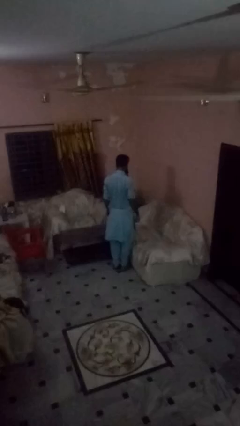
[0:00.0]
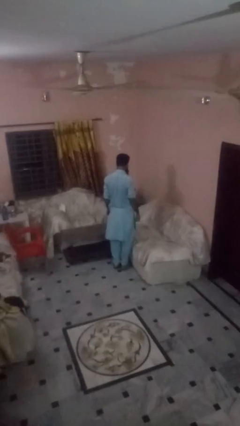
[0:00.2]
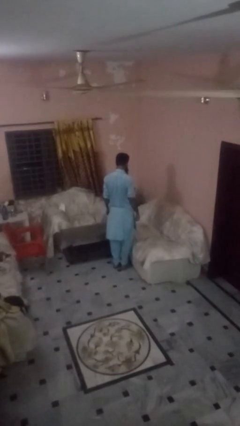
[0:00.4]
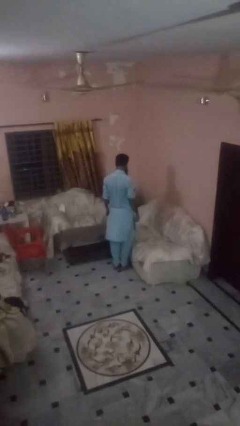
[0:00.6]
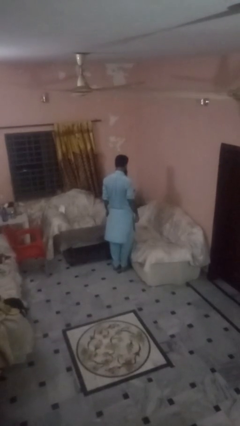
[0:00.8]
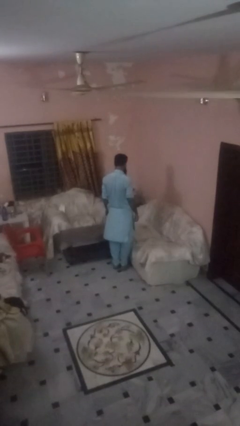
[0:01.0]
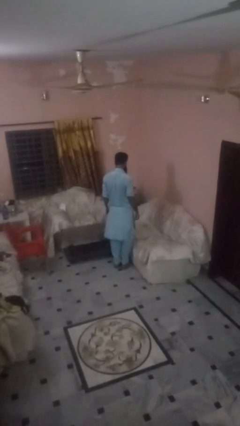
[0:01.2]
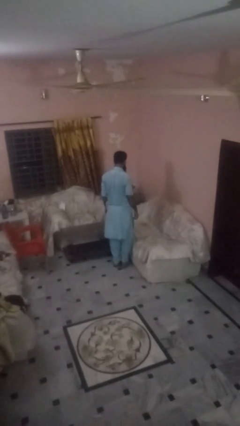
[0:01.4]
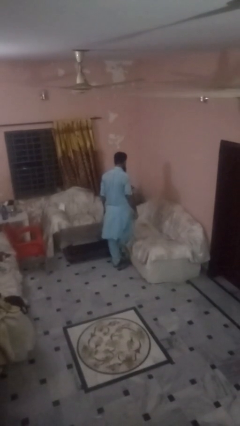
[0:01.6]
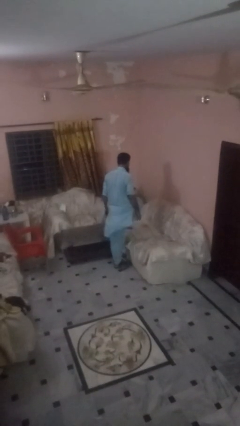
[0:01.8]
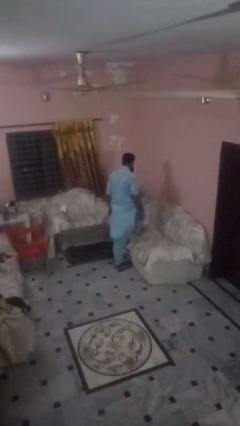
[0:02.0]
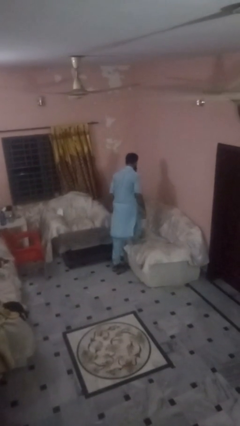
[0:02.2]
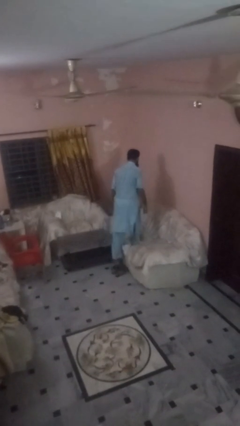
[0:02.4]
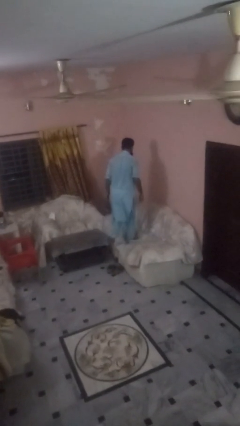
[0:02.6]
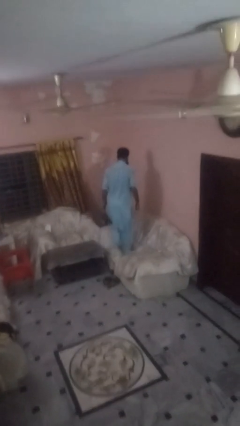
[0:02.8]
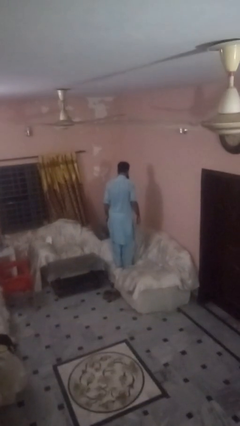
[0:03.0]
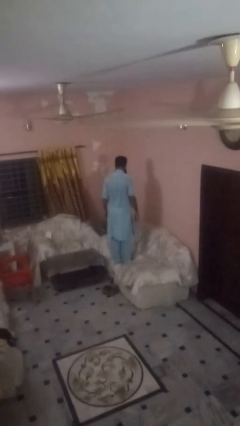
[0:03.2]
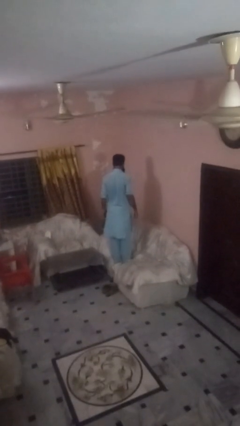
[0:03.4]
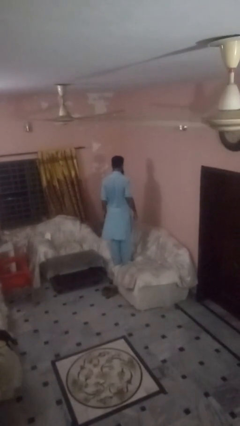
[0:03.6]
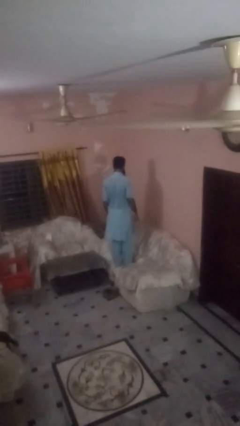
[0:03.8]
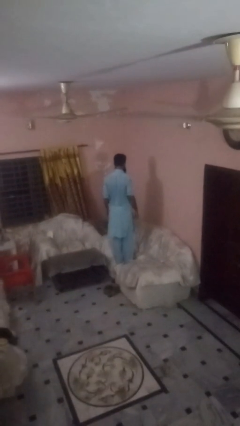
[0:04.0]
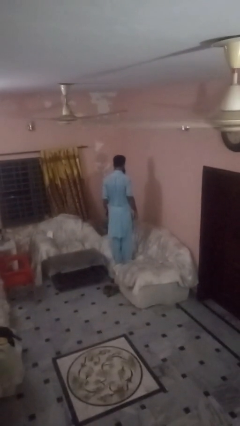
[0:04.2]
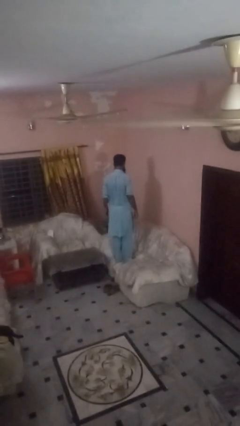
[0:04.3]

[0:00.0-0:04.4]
person climbs on couch

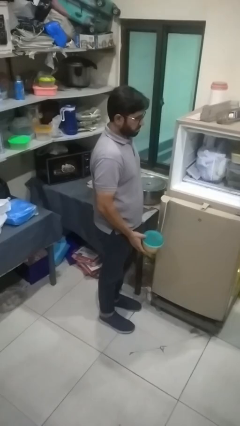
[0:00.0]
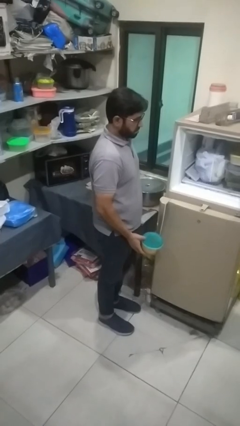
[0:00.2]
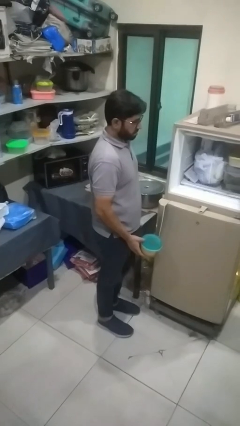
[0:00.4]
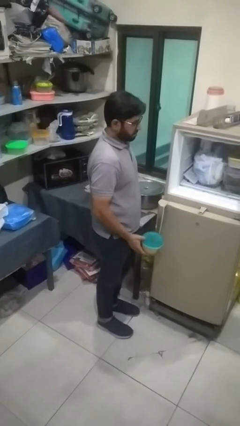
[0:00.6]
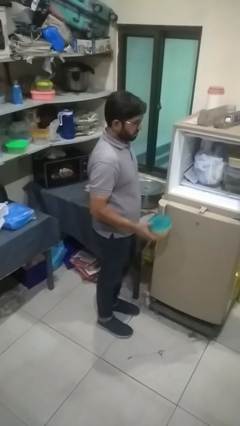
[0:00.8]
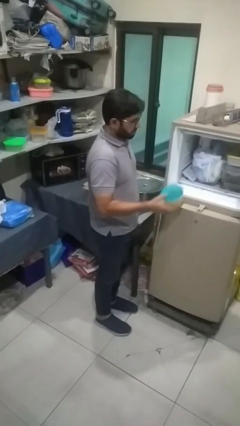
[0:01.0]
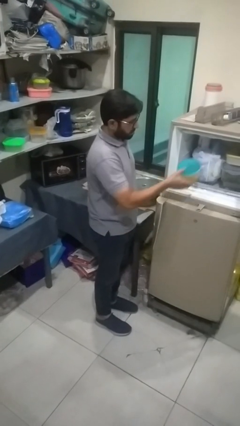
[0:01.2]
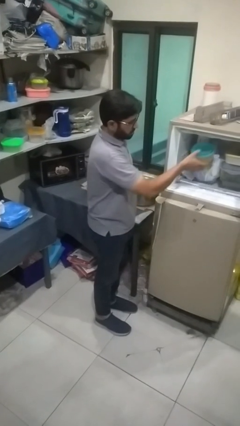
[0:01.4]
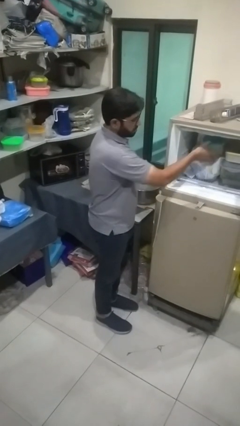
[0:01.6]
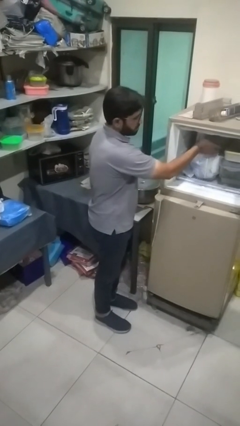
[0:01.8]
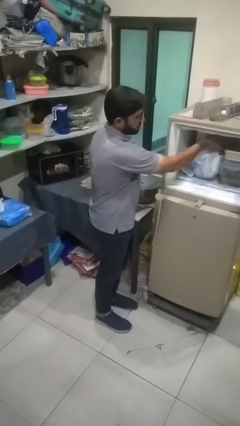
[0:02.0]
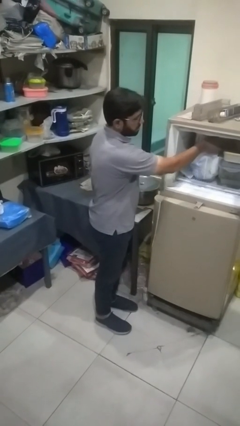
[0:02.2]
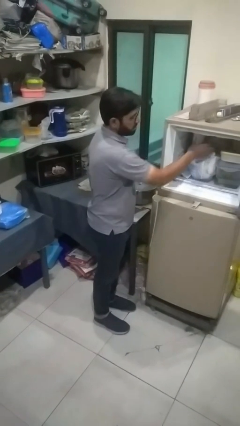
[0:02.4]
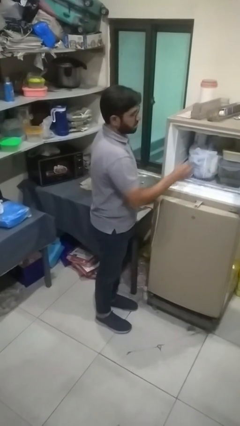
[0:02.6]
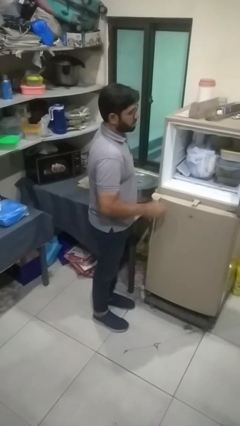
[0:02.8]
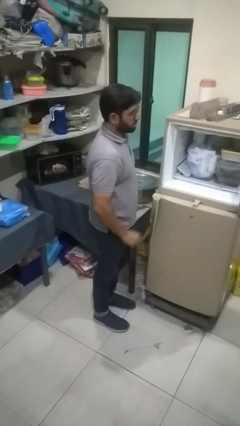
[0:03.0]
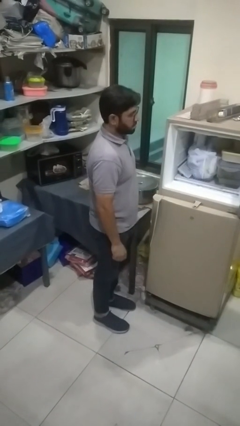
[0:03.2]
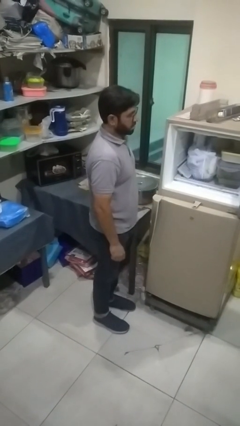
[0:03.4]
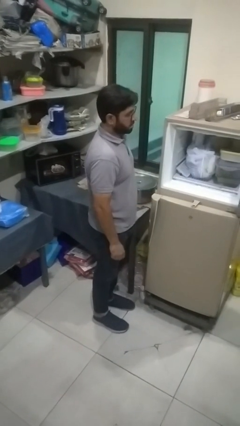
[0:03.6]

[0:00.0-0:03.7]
person puts object into refrigerator

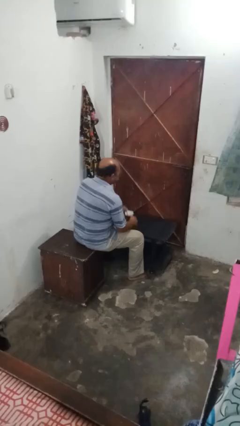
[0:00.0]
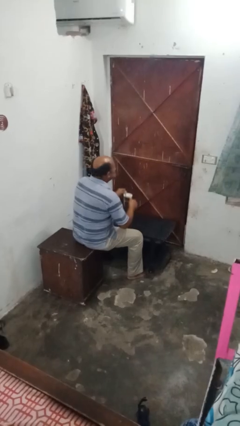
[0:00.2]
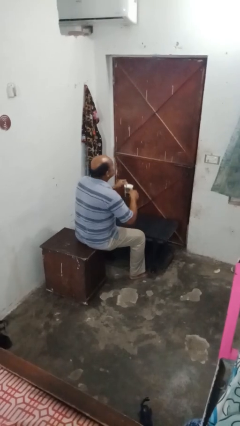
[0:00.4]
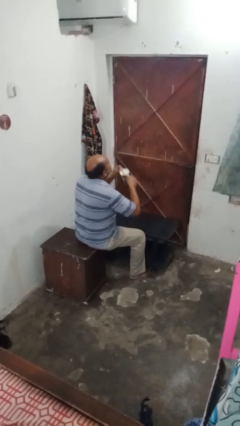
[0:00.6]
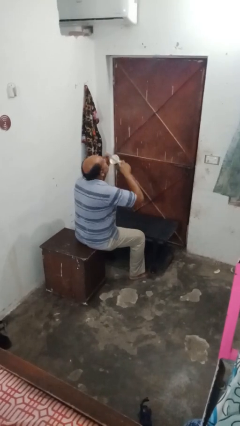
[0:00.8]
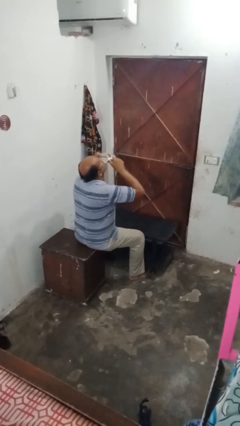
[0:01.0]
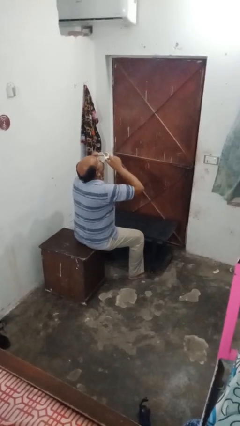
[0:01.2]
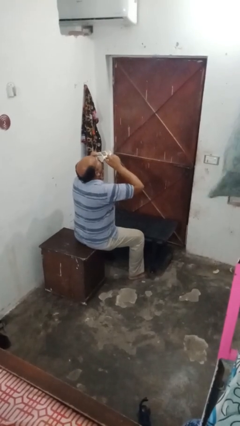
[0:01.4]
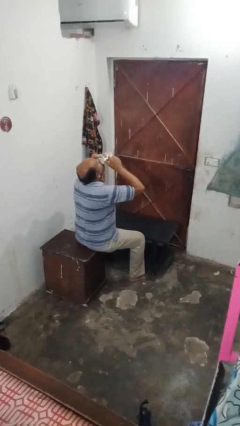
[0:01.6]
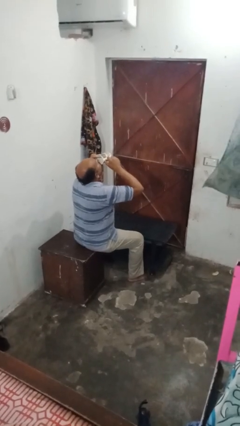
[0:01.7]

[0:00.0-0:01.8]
person drinks from mug

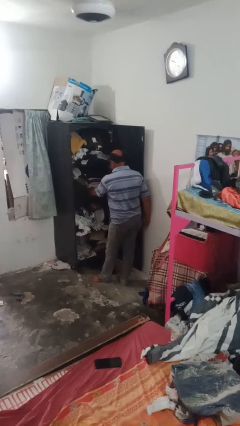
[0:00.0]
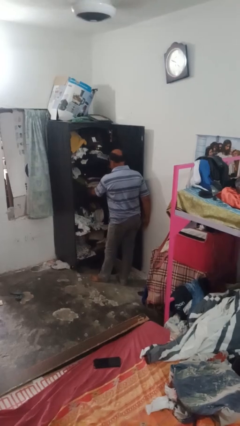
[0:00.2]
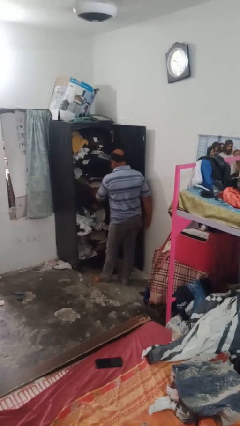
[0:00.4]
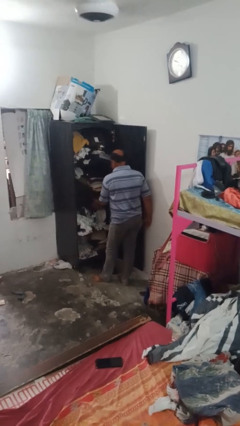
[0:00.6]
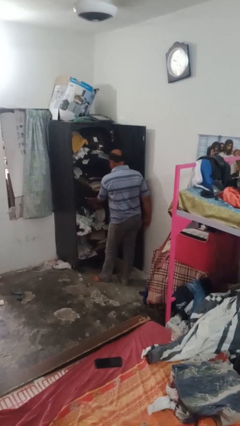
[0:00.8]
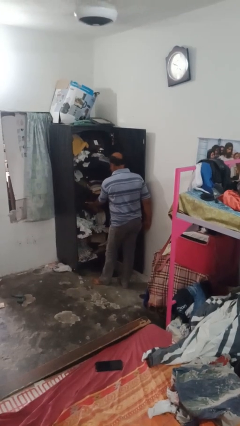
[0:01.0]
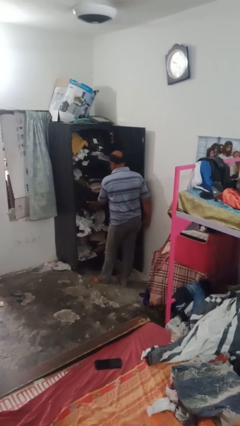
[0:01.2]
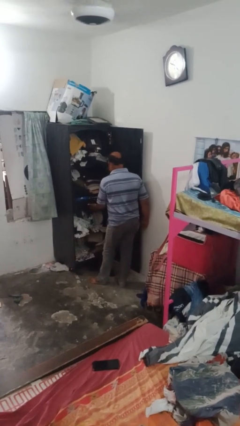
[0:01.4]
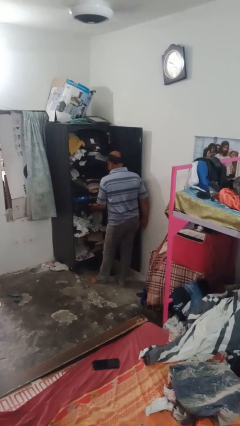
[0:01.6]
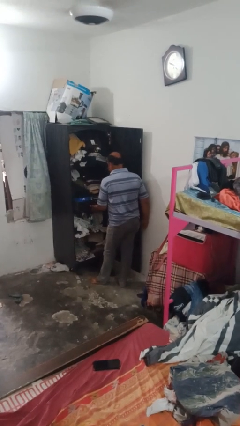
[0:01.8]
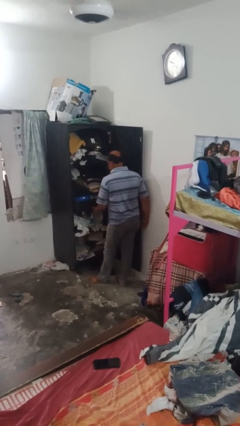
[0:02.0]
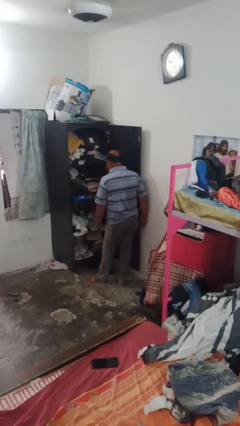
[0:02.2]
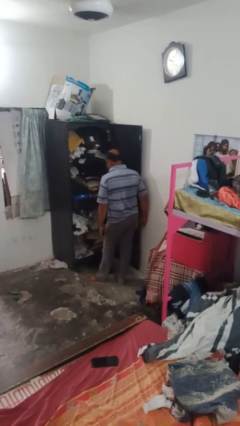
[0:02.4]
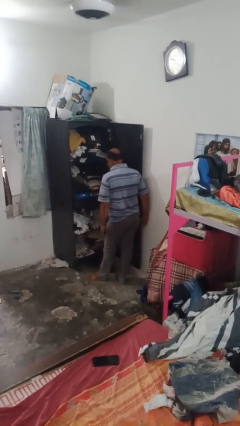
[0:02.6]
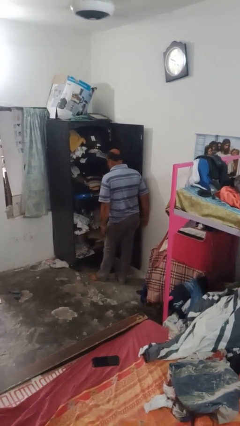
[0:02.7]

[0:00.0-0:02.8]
person opens dresser drawer

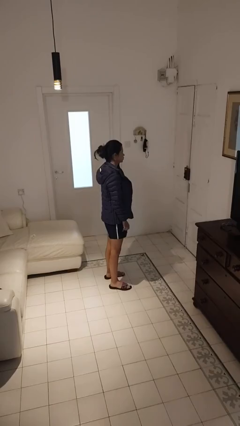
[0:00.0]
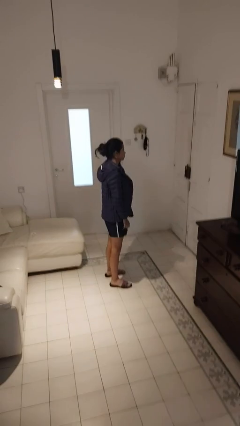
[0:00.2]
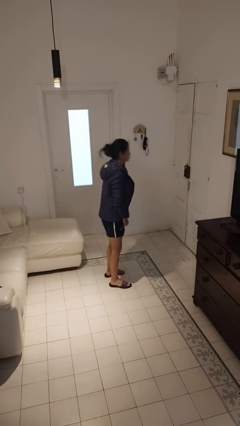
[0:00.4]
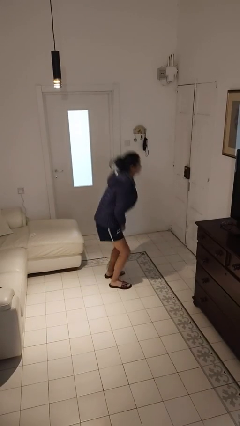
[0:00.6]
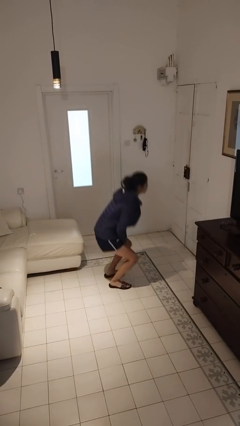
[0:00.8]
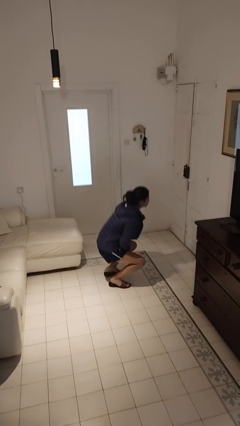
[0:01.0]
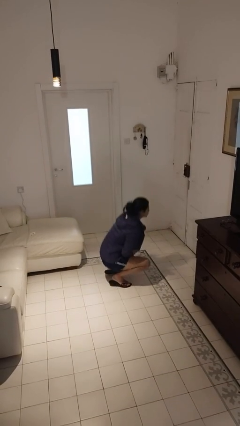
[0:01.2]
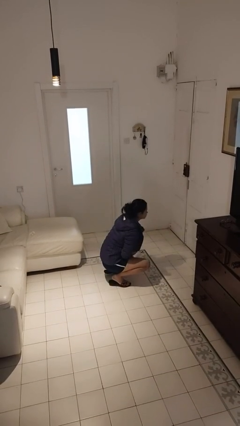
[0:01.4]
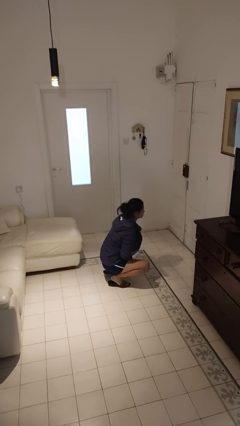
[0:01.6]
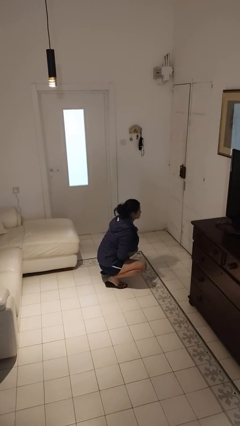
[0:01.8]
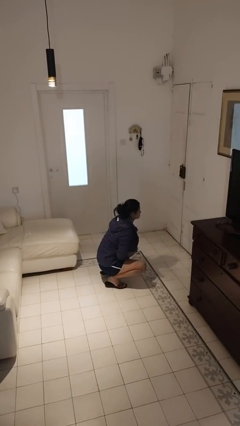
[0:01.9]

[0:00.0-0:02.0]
person squats

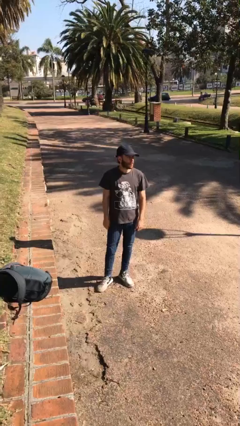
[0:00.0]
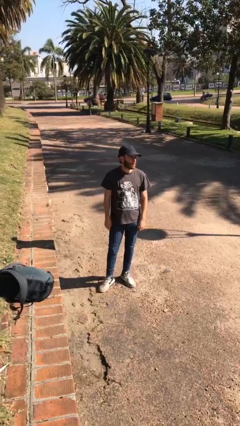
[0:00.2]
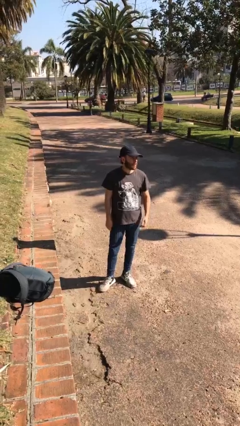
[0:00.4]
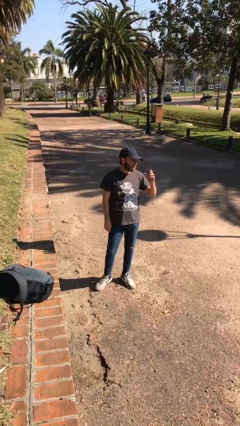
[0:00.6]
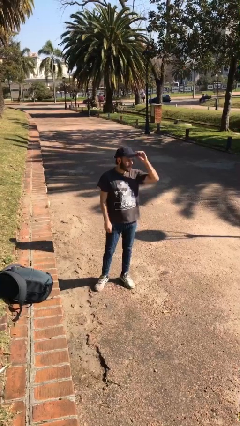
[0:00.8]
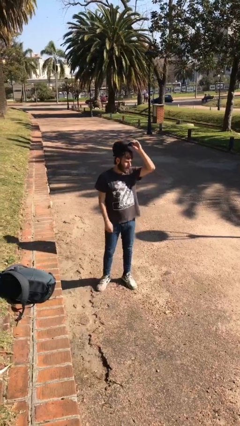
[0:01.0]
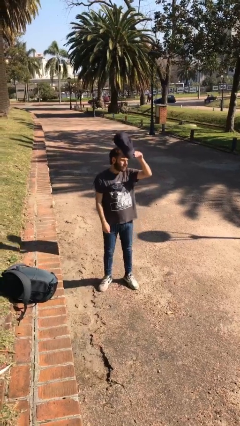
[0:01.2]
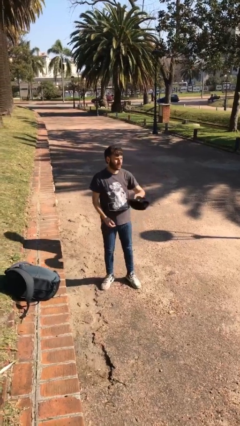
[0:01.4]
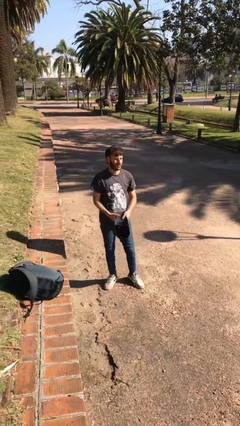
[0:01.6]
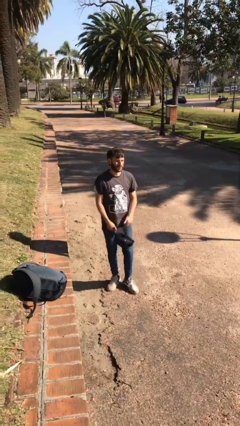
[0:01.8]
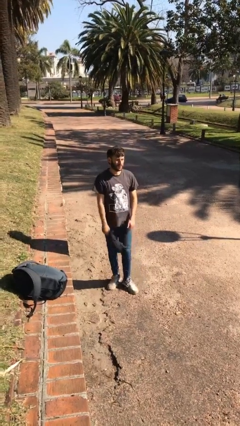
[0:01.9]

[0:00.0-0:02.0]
person takes off hat

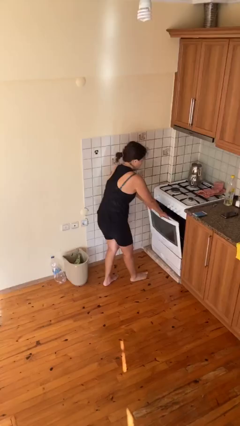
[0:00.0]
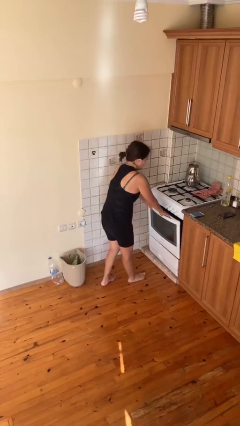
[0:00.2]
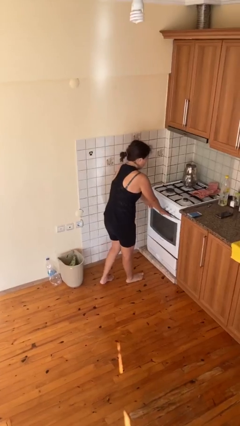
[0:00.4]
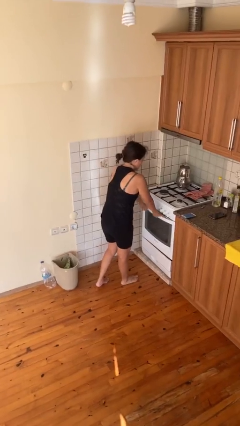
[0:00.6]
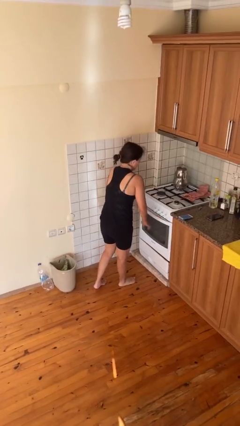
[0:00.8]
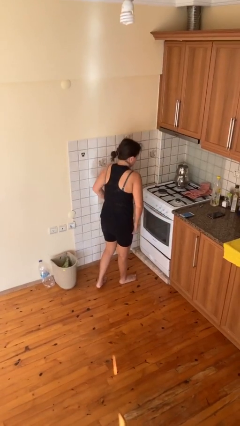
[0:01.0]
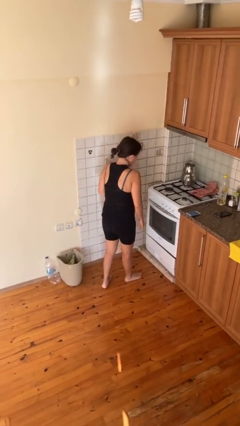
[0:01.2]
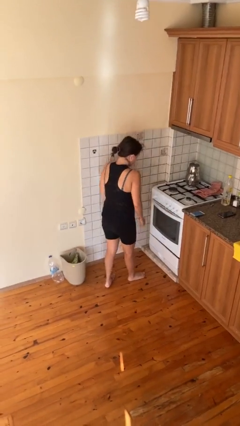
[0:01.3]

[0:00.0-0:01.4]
person closes oven door
